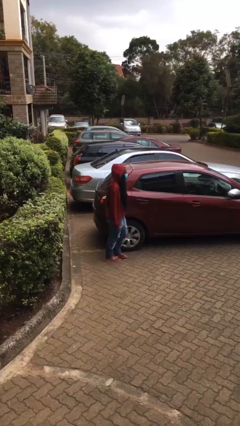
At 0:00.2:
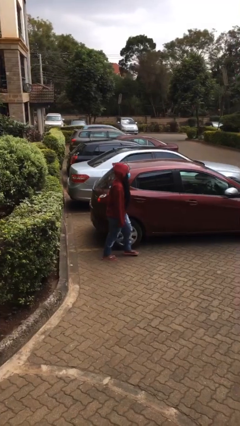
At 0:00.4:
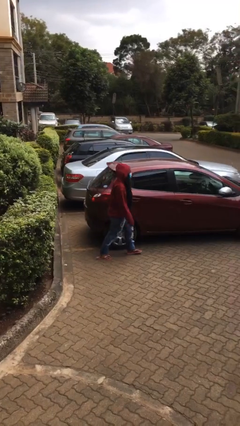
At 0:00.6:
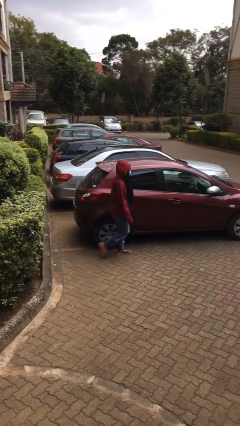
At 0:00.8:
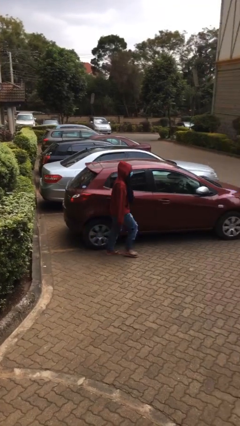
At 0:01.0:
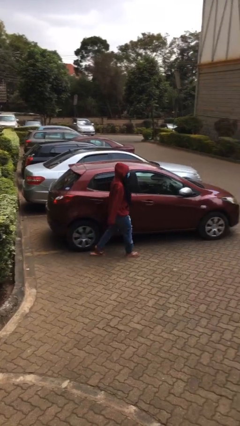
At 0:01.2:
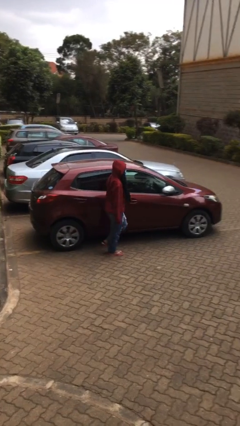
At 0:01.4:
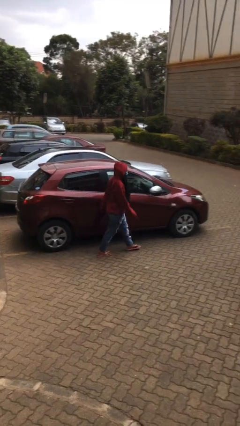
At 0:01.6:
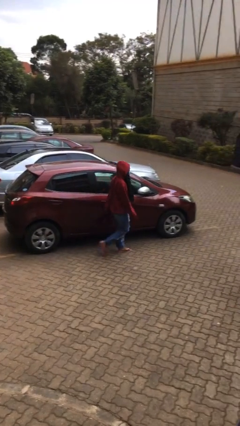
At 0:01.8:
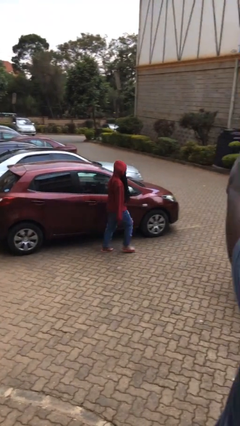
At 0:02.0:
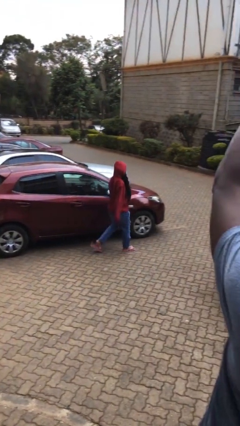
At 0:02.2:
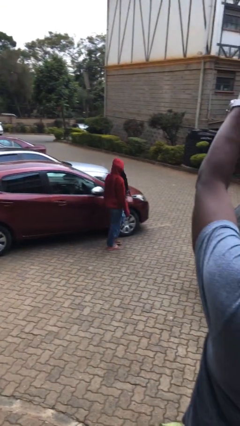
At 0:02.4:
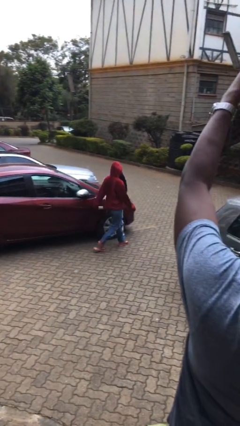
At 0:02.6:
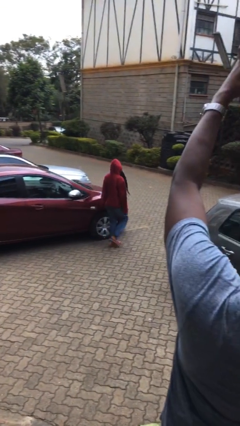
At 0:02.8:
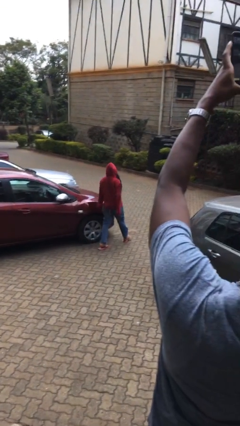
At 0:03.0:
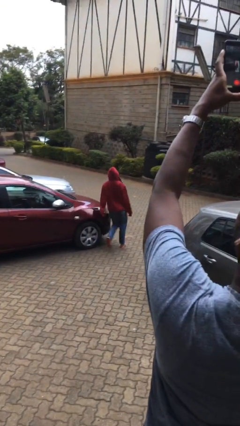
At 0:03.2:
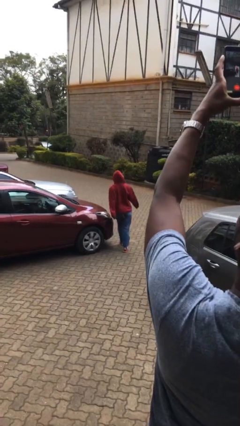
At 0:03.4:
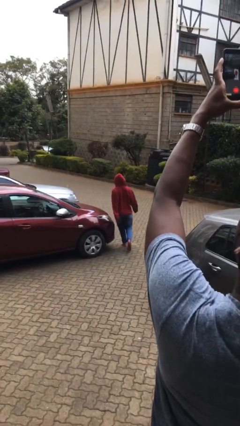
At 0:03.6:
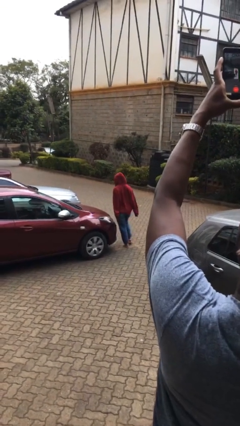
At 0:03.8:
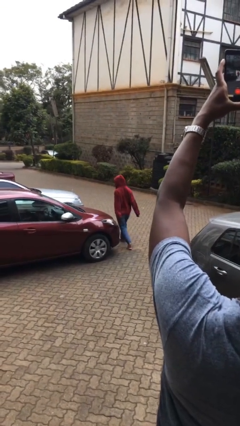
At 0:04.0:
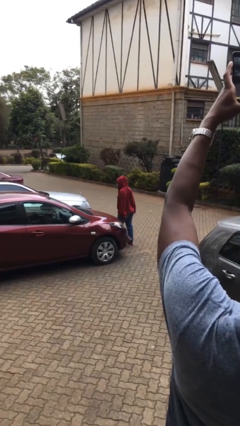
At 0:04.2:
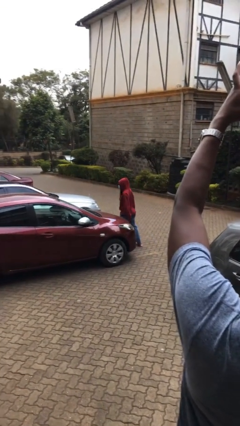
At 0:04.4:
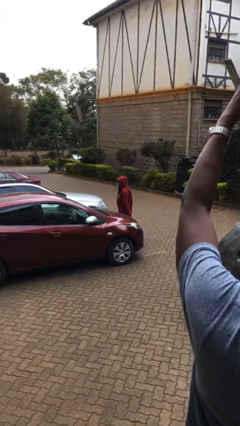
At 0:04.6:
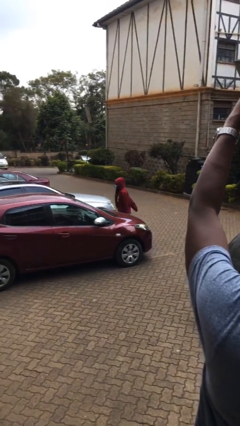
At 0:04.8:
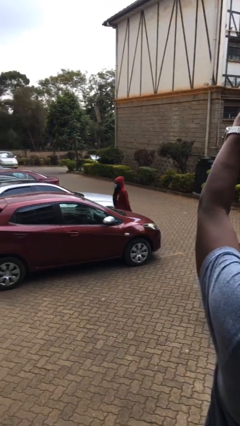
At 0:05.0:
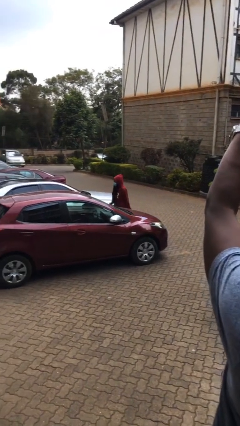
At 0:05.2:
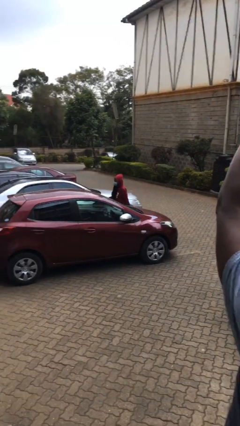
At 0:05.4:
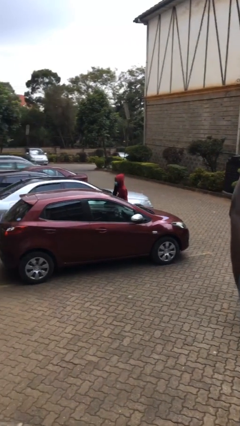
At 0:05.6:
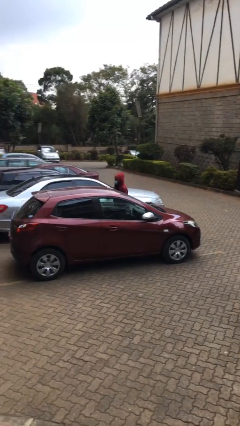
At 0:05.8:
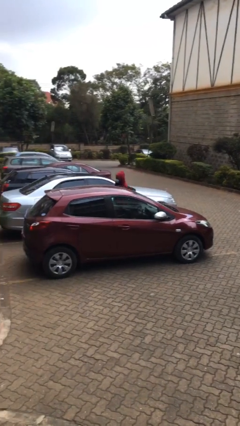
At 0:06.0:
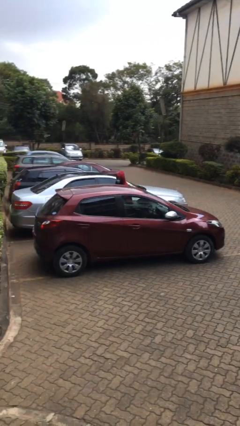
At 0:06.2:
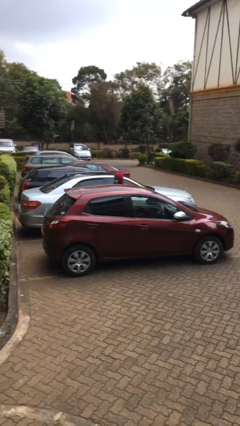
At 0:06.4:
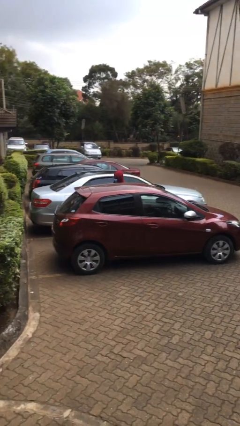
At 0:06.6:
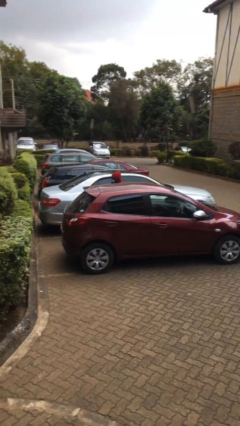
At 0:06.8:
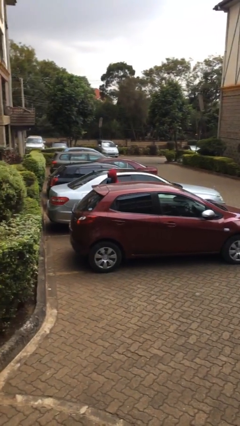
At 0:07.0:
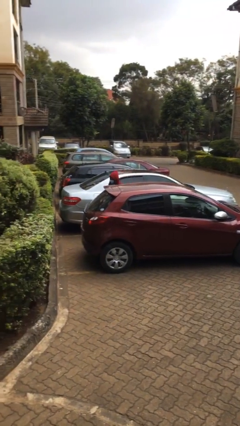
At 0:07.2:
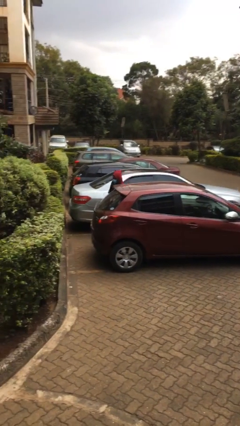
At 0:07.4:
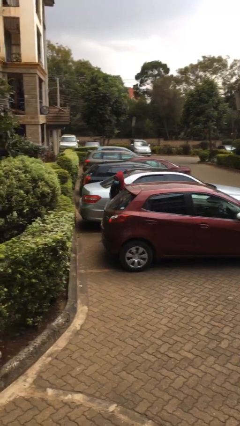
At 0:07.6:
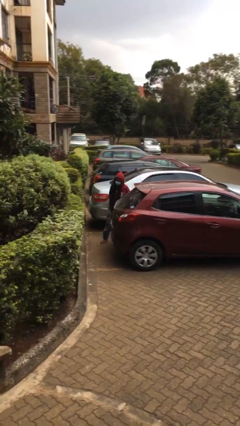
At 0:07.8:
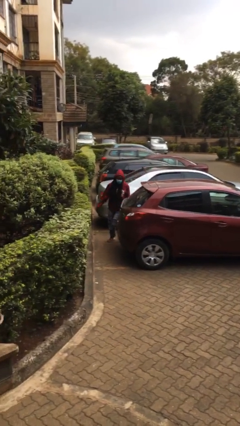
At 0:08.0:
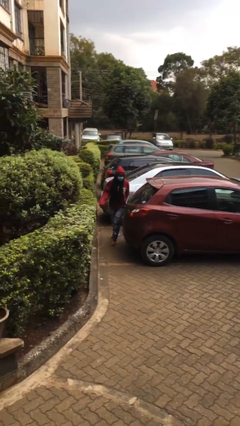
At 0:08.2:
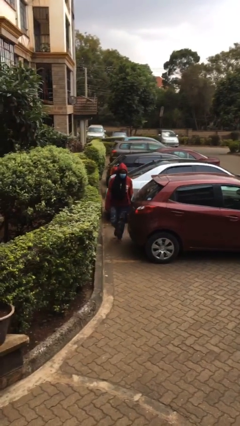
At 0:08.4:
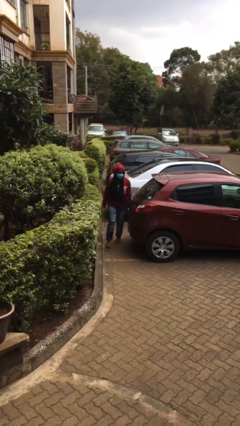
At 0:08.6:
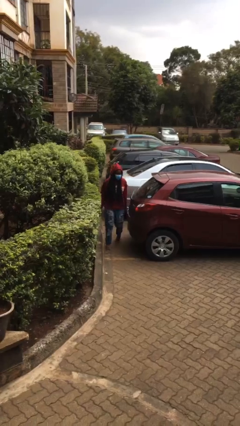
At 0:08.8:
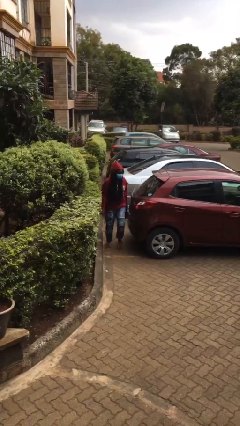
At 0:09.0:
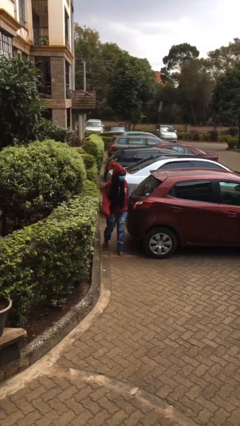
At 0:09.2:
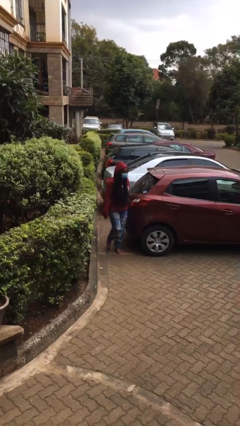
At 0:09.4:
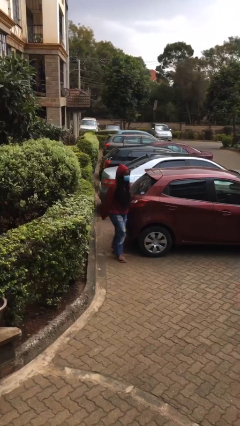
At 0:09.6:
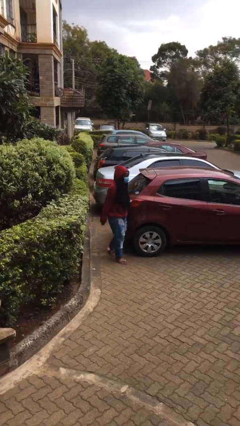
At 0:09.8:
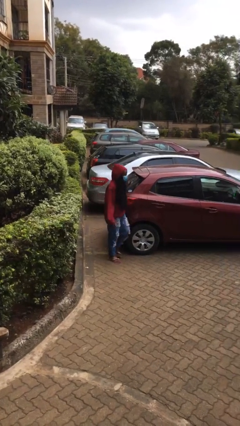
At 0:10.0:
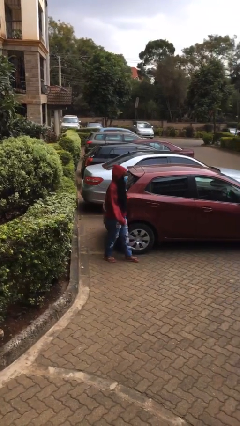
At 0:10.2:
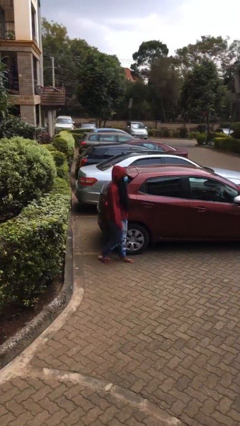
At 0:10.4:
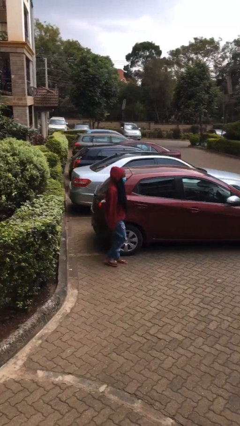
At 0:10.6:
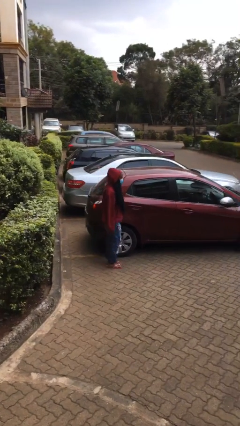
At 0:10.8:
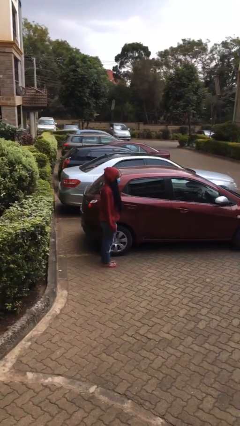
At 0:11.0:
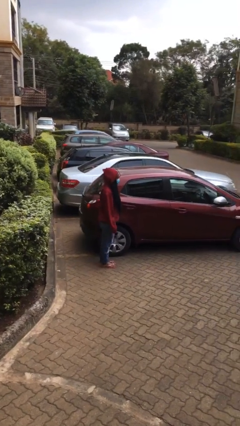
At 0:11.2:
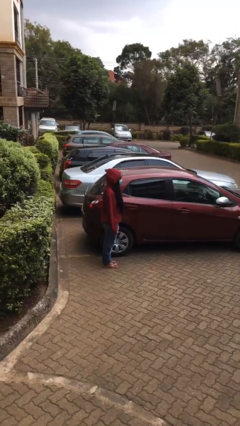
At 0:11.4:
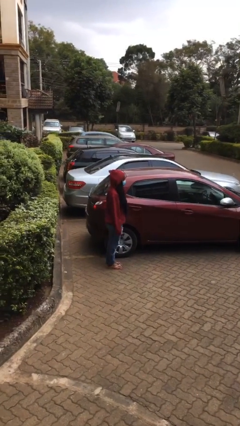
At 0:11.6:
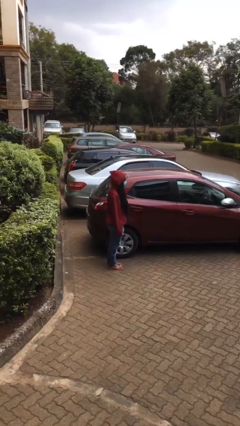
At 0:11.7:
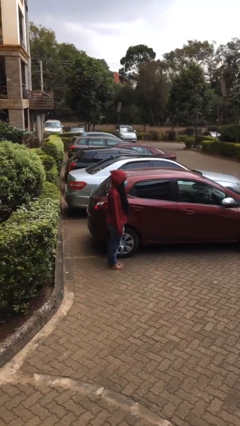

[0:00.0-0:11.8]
person walks around car

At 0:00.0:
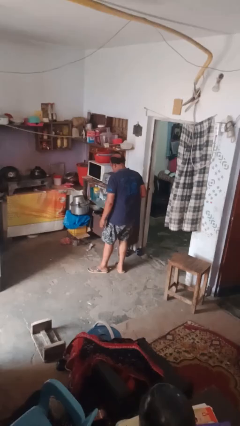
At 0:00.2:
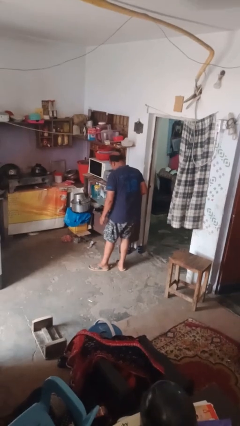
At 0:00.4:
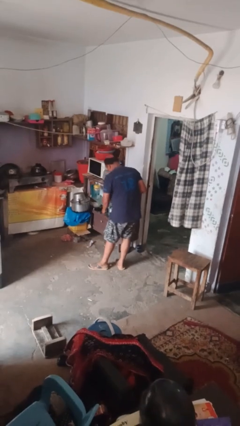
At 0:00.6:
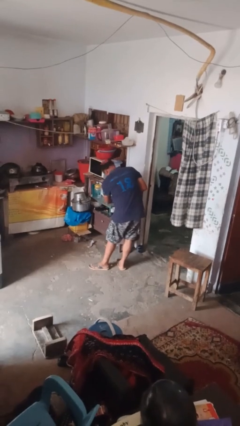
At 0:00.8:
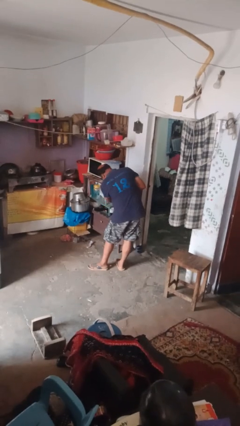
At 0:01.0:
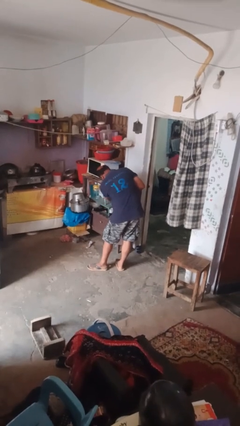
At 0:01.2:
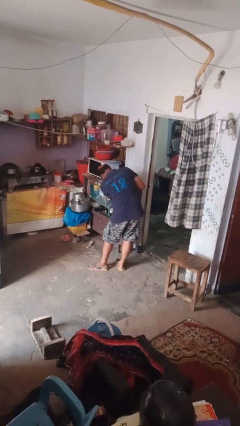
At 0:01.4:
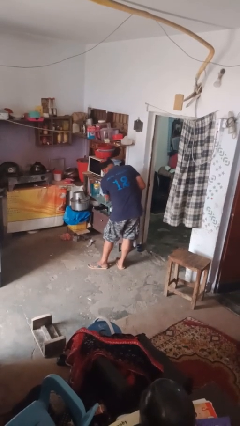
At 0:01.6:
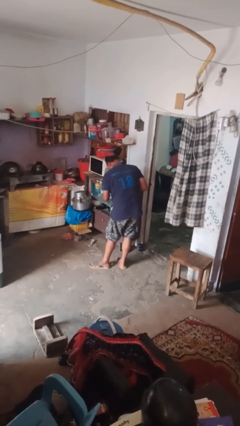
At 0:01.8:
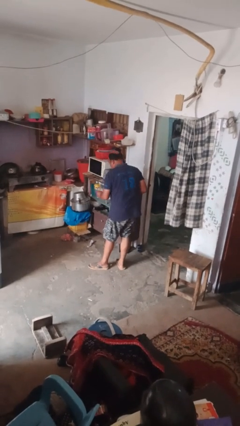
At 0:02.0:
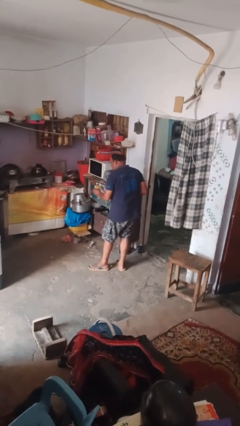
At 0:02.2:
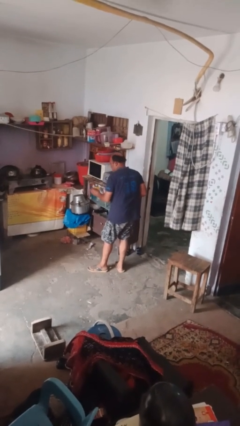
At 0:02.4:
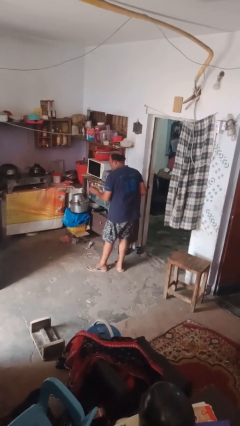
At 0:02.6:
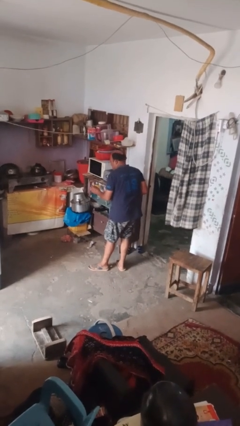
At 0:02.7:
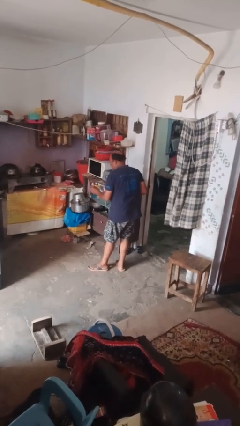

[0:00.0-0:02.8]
person takes object from kitchen drawer

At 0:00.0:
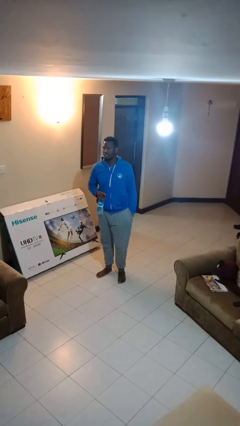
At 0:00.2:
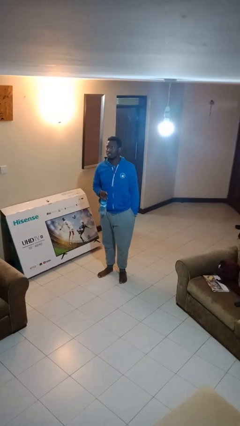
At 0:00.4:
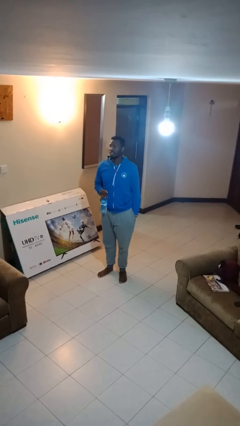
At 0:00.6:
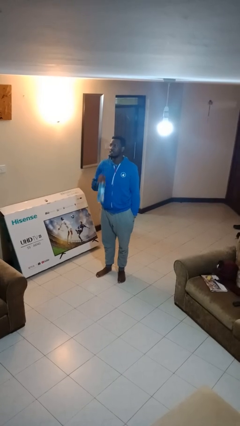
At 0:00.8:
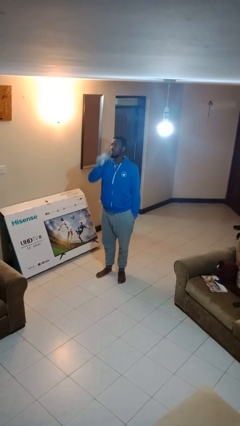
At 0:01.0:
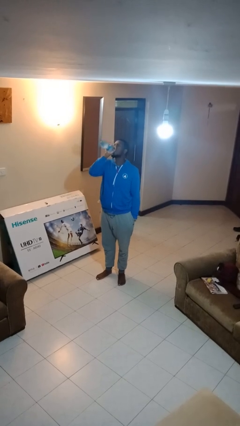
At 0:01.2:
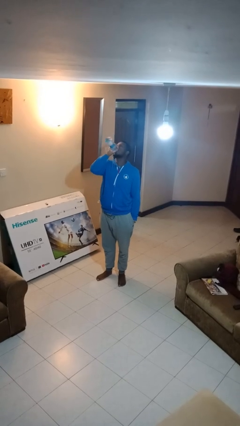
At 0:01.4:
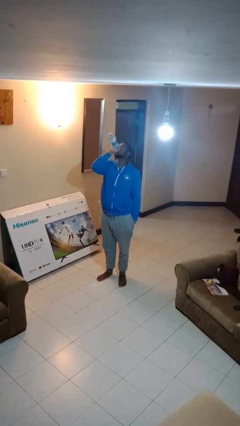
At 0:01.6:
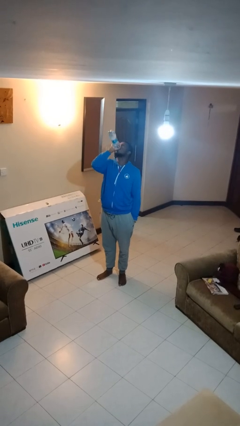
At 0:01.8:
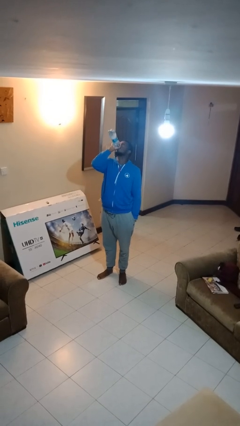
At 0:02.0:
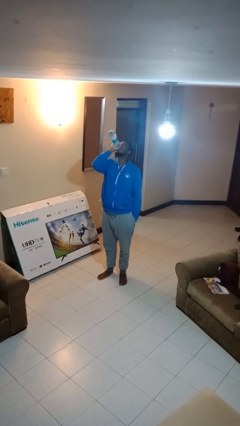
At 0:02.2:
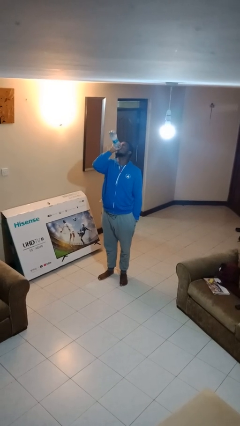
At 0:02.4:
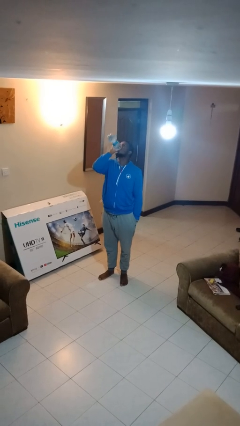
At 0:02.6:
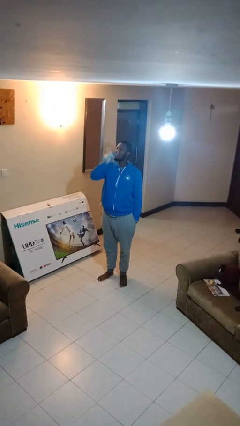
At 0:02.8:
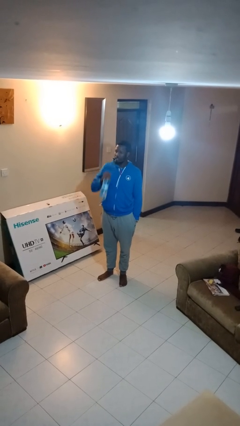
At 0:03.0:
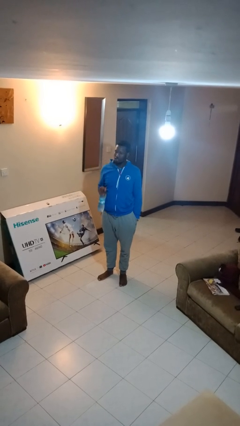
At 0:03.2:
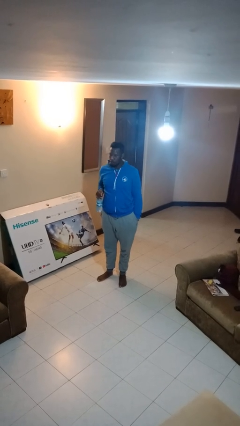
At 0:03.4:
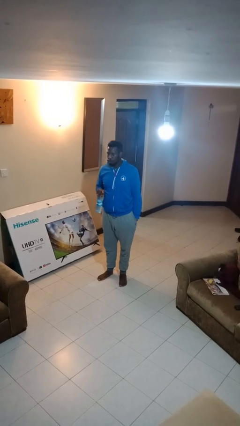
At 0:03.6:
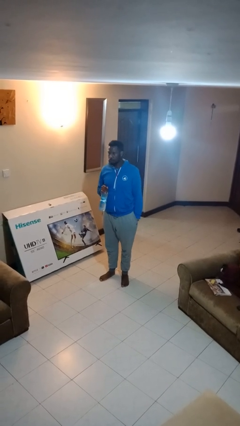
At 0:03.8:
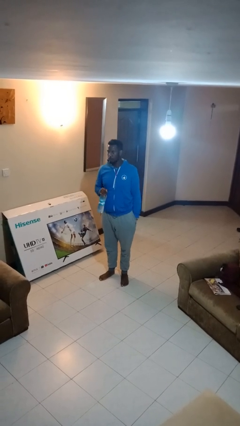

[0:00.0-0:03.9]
person drinks from bottle
